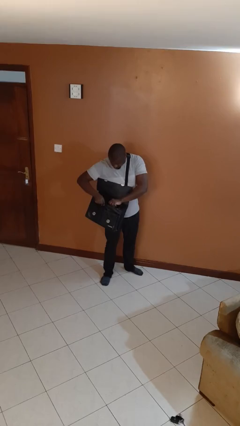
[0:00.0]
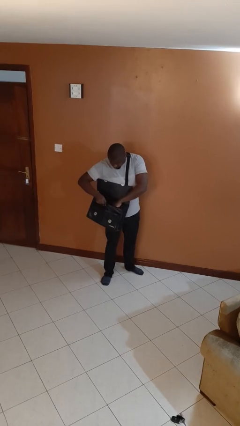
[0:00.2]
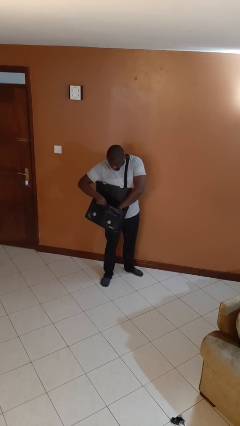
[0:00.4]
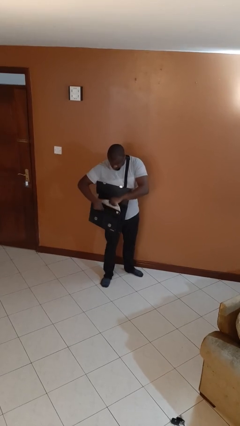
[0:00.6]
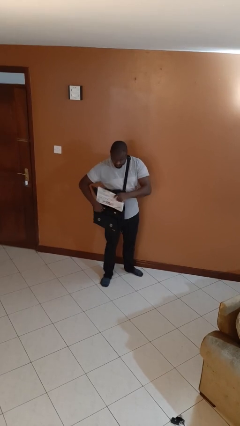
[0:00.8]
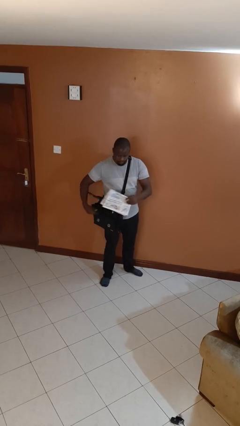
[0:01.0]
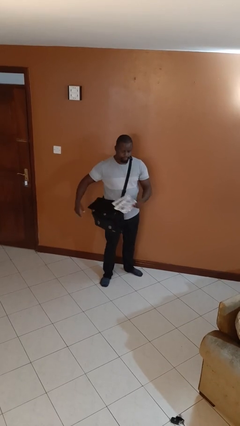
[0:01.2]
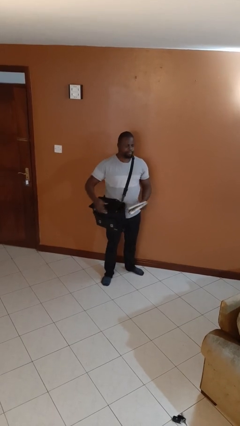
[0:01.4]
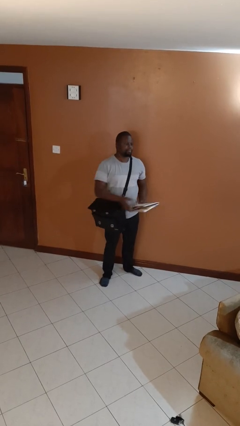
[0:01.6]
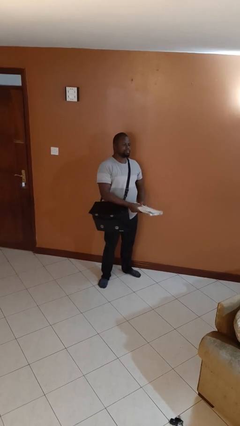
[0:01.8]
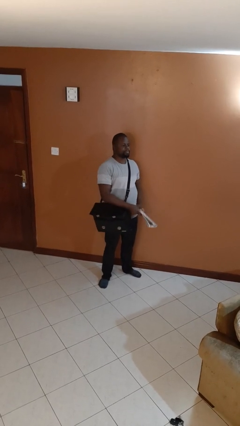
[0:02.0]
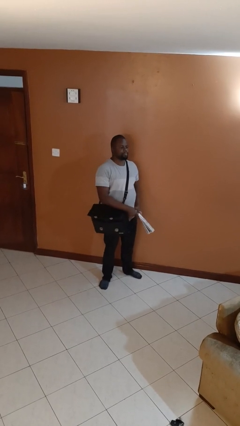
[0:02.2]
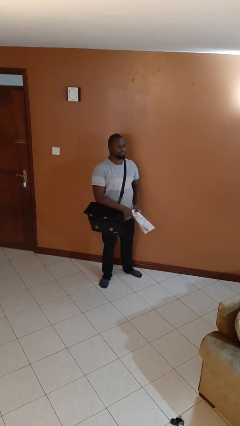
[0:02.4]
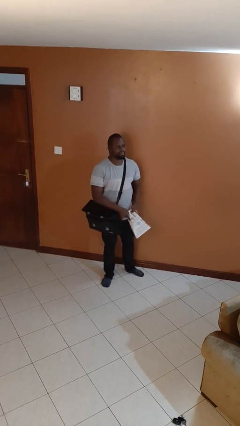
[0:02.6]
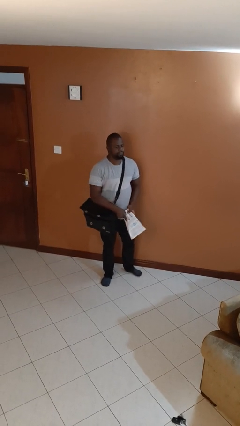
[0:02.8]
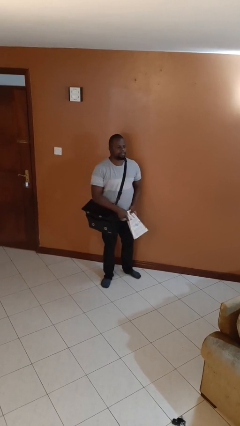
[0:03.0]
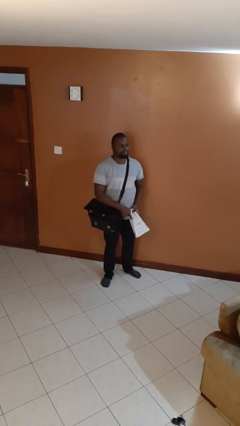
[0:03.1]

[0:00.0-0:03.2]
person takes object from purse

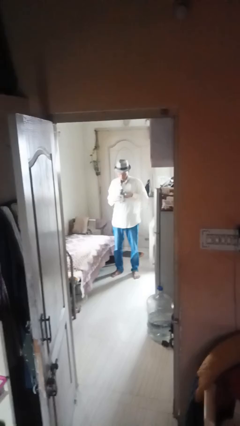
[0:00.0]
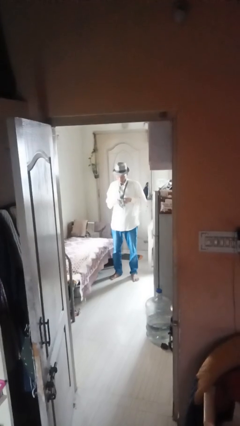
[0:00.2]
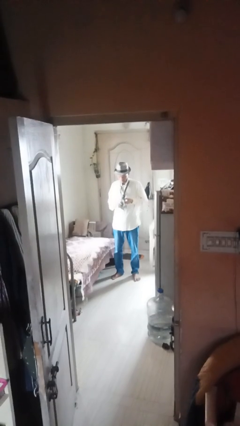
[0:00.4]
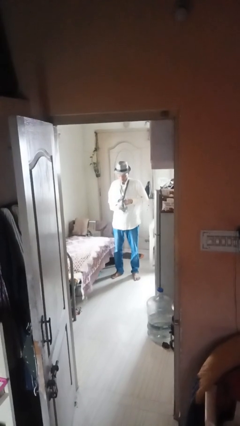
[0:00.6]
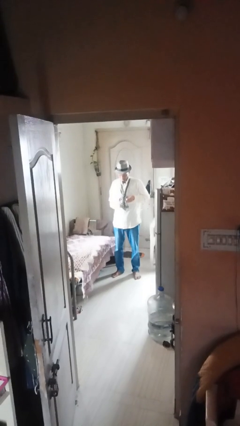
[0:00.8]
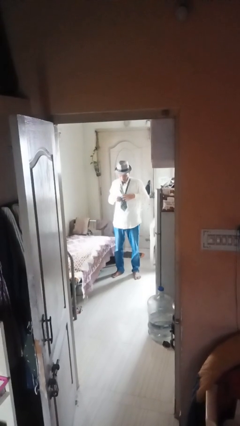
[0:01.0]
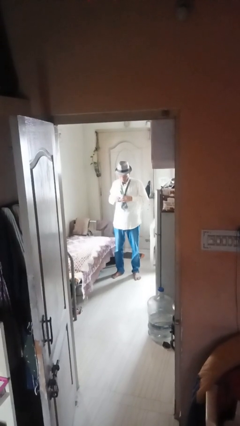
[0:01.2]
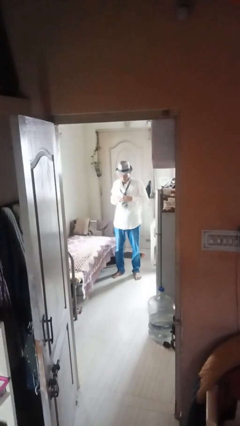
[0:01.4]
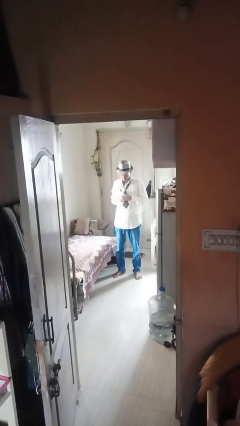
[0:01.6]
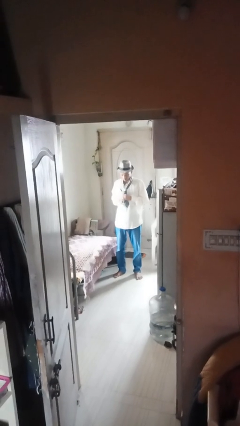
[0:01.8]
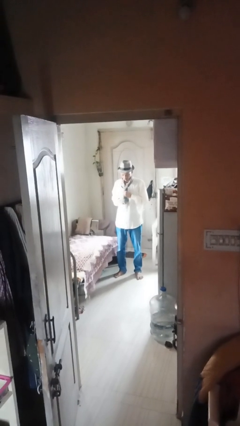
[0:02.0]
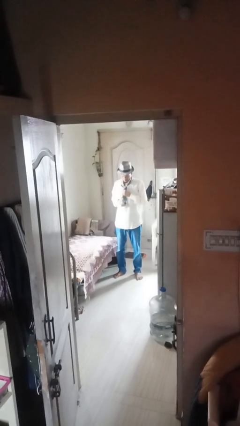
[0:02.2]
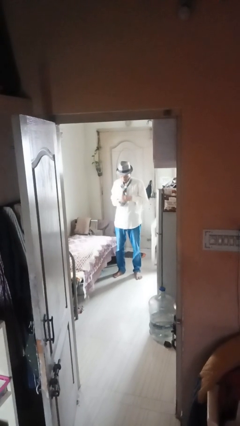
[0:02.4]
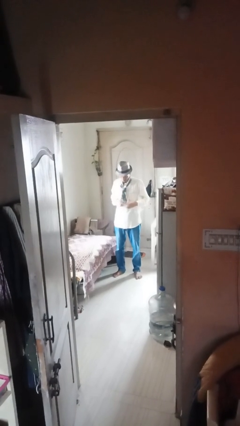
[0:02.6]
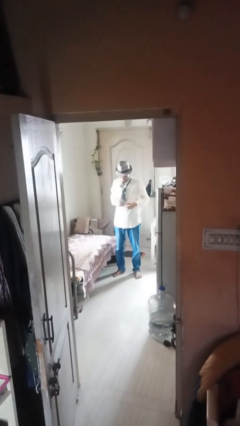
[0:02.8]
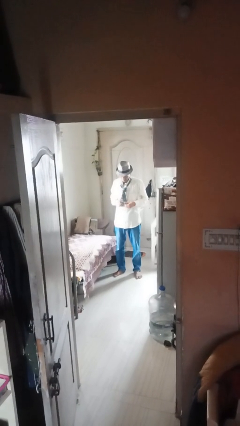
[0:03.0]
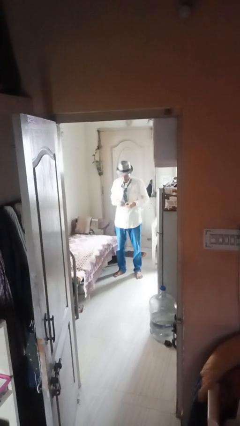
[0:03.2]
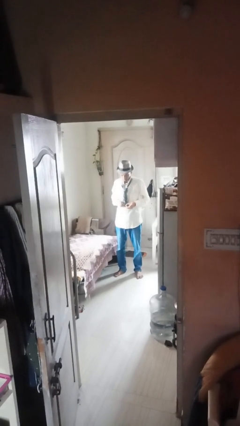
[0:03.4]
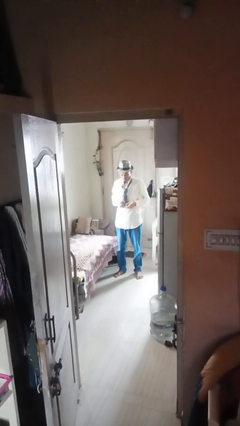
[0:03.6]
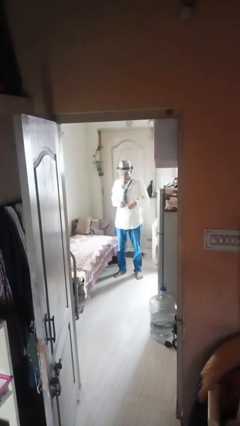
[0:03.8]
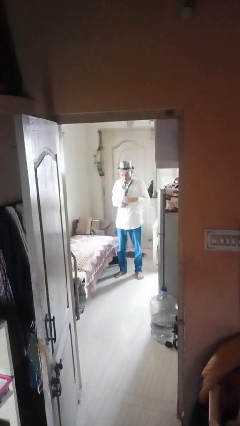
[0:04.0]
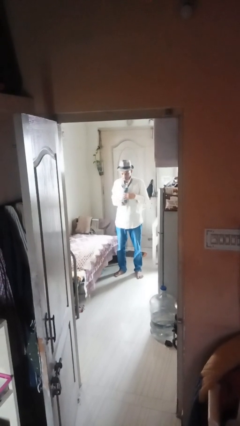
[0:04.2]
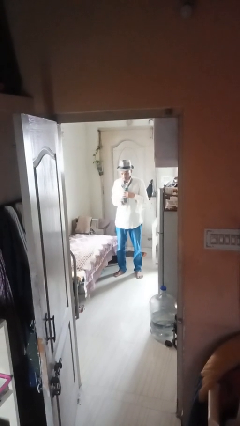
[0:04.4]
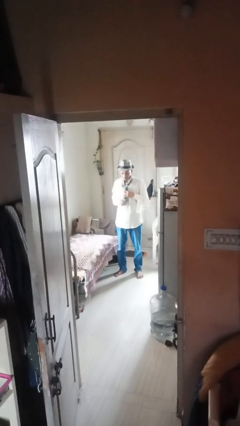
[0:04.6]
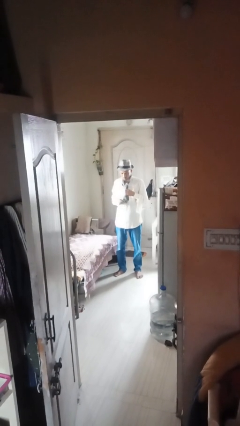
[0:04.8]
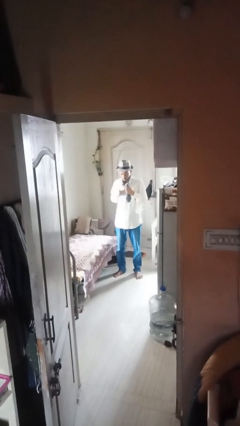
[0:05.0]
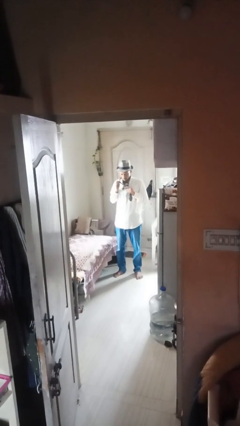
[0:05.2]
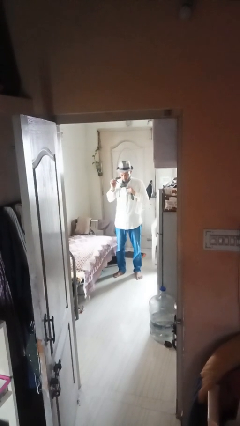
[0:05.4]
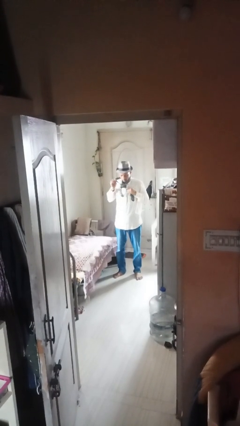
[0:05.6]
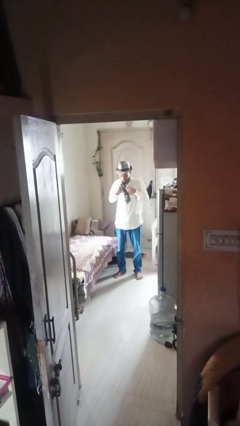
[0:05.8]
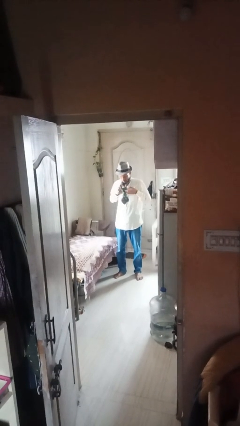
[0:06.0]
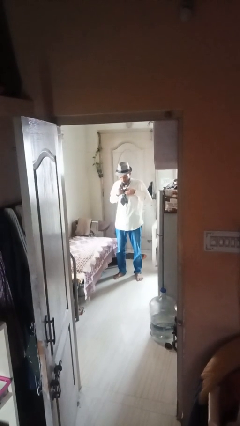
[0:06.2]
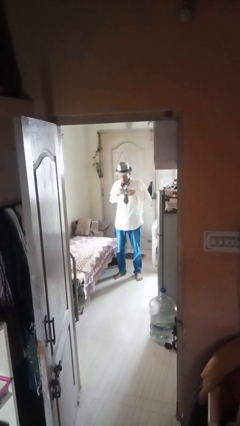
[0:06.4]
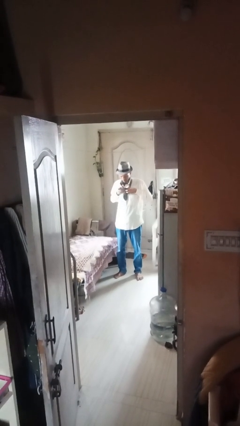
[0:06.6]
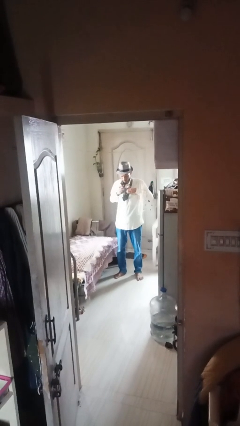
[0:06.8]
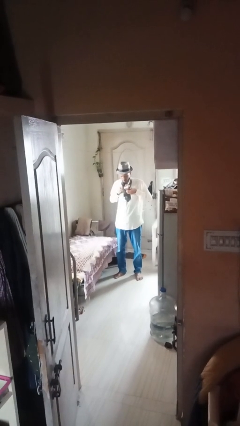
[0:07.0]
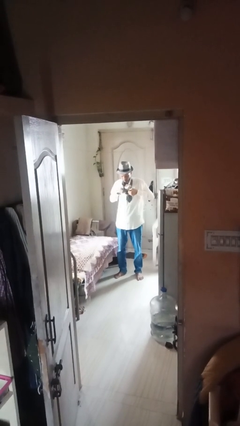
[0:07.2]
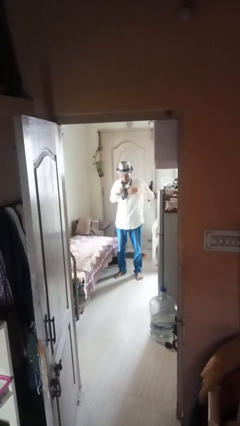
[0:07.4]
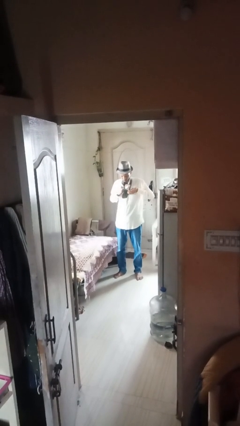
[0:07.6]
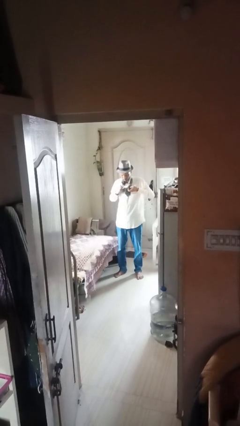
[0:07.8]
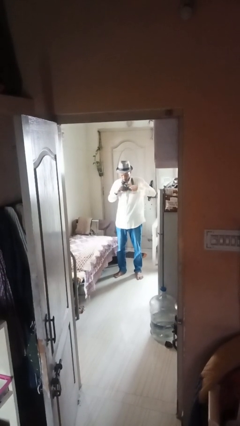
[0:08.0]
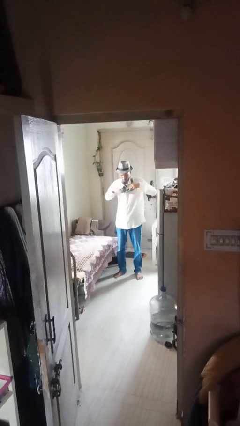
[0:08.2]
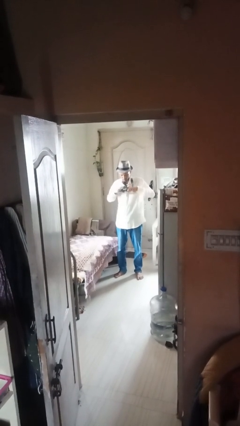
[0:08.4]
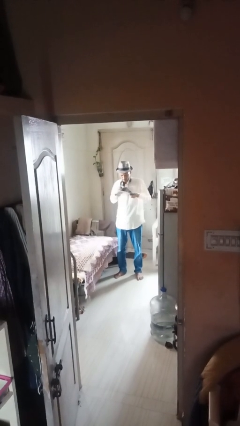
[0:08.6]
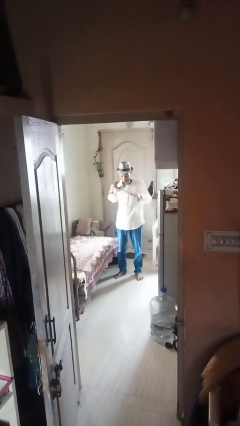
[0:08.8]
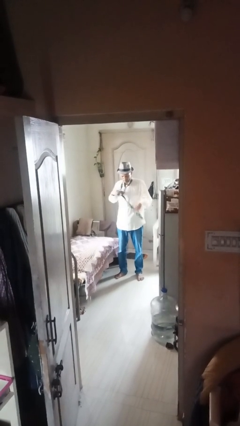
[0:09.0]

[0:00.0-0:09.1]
person takes off necktie

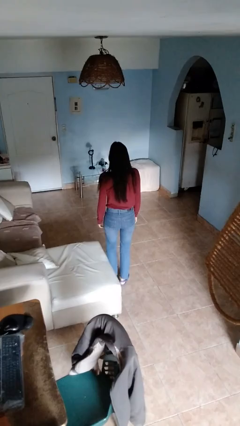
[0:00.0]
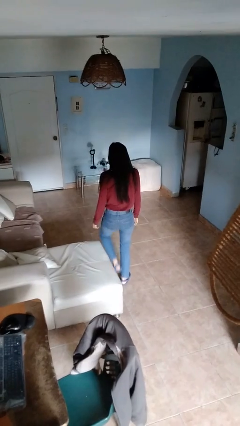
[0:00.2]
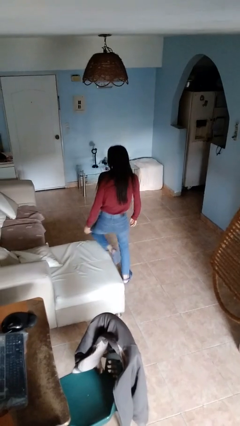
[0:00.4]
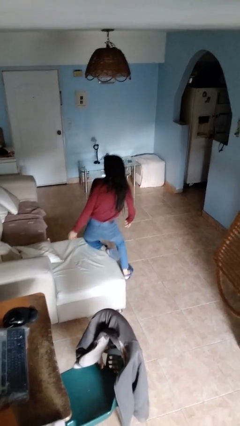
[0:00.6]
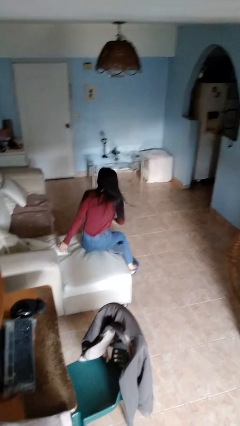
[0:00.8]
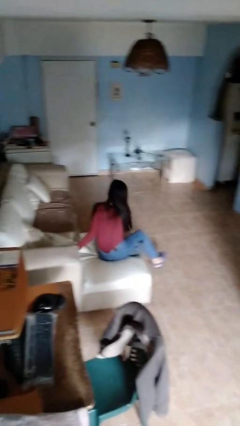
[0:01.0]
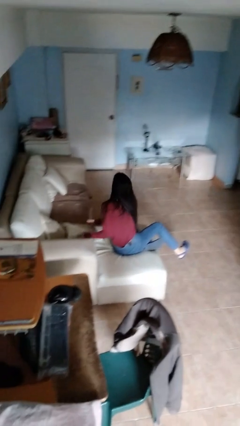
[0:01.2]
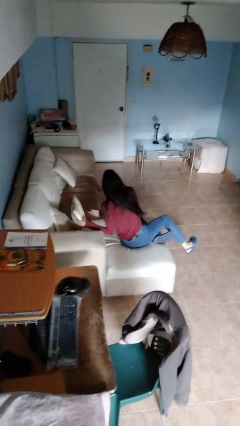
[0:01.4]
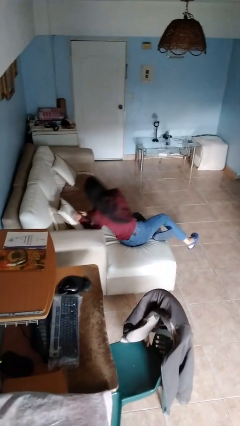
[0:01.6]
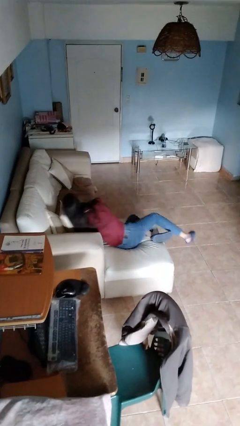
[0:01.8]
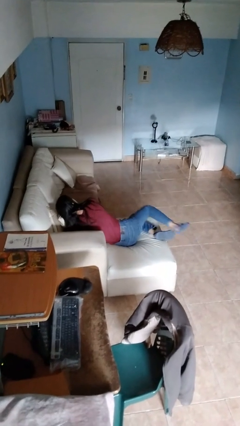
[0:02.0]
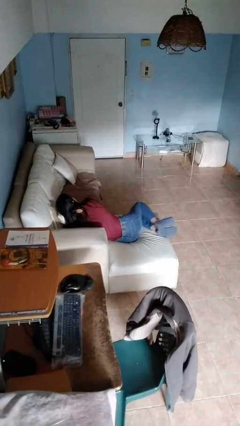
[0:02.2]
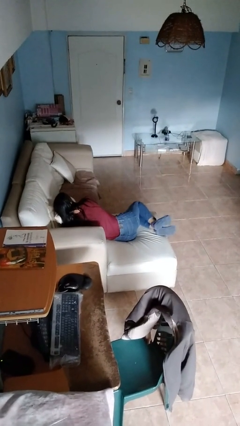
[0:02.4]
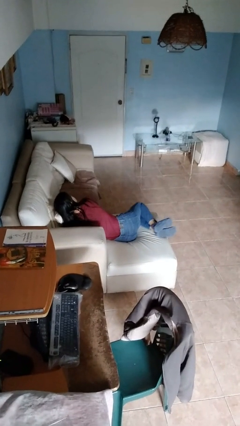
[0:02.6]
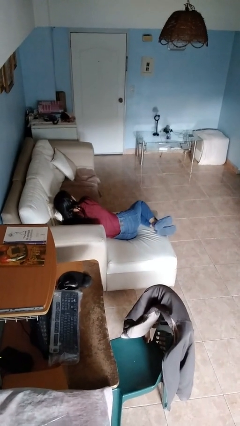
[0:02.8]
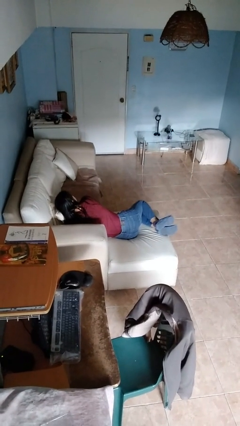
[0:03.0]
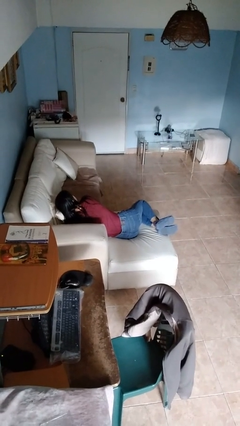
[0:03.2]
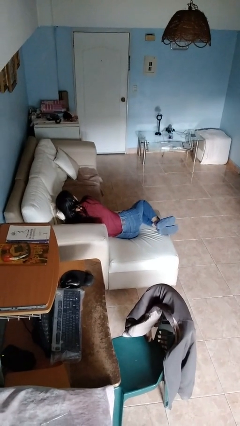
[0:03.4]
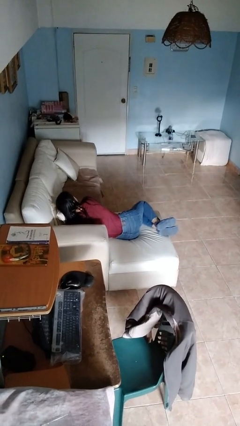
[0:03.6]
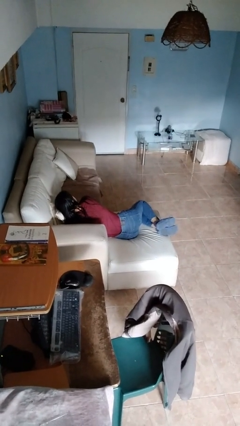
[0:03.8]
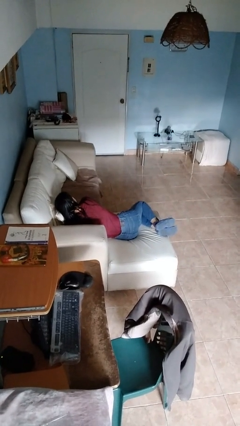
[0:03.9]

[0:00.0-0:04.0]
person lies down on couch

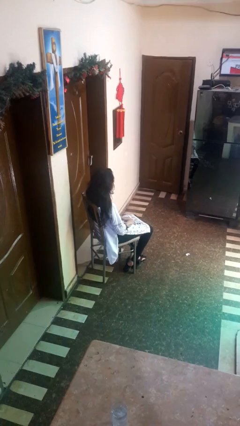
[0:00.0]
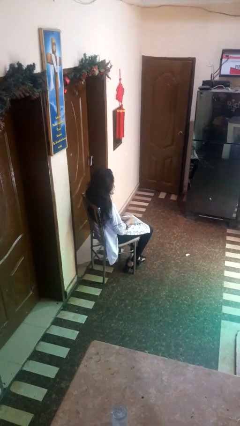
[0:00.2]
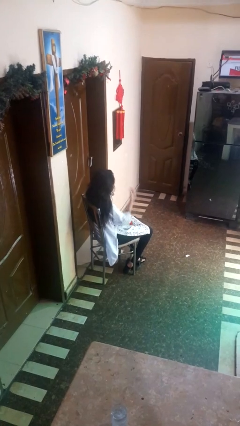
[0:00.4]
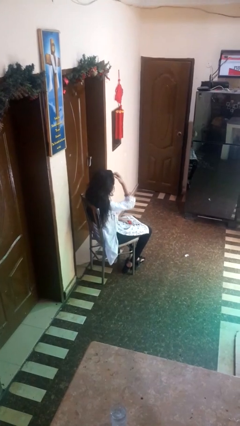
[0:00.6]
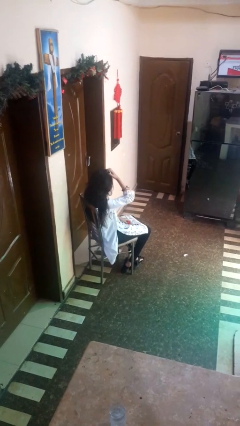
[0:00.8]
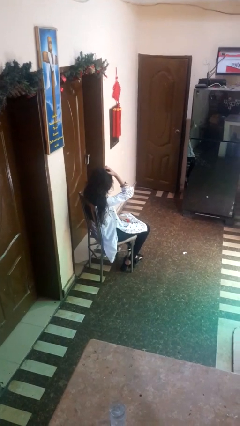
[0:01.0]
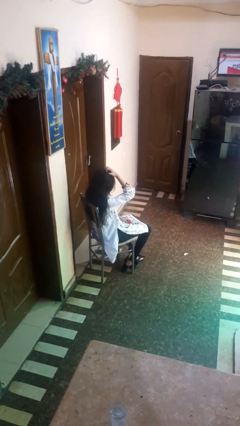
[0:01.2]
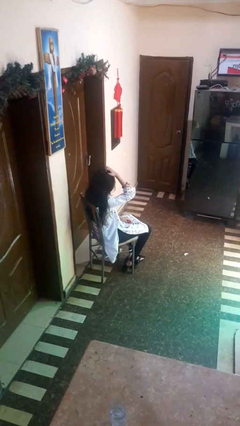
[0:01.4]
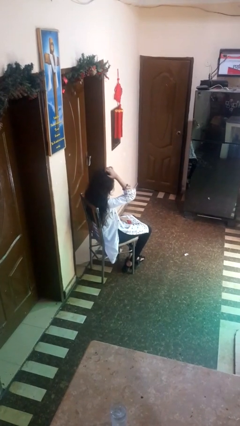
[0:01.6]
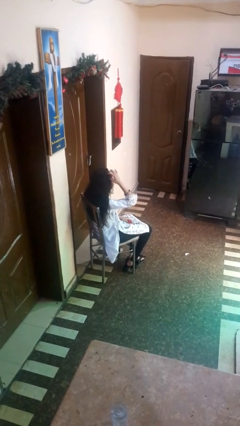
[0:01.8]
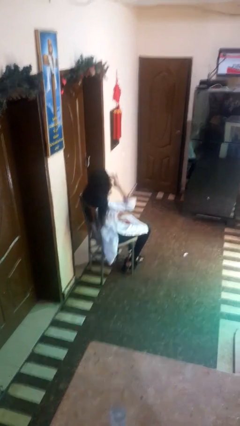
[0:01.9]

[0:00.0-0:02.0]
person strokes hair
